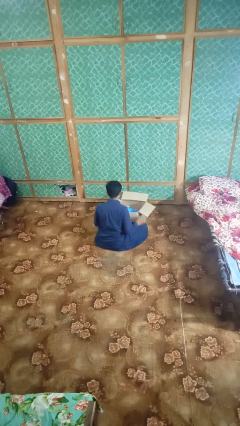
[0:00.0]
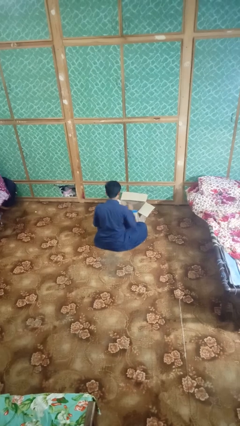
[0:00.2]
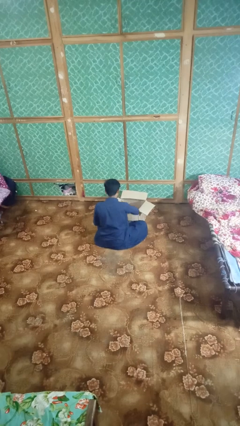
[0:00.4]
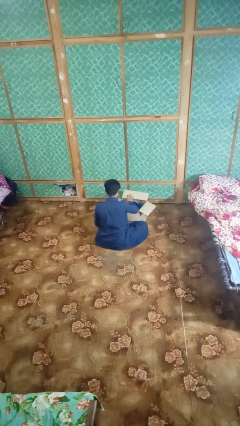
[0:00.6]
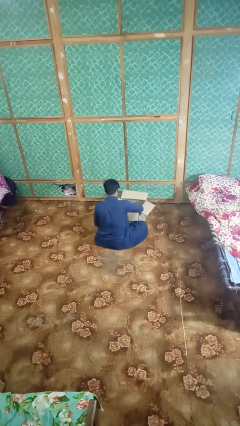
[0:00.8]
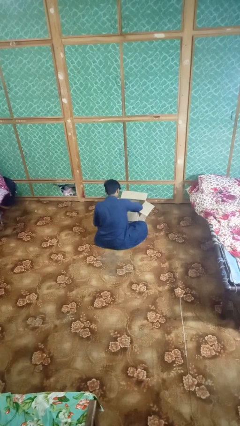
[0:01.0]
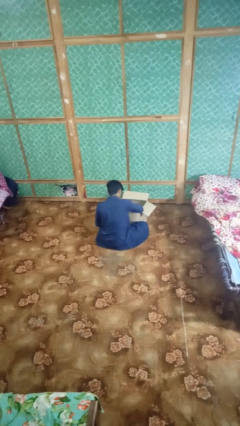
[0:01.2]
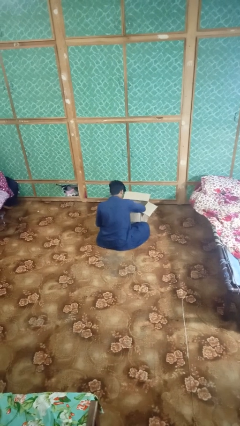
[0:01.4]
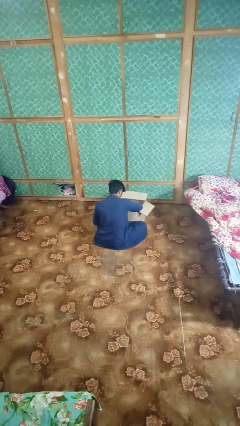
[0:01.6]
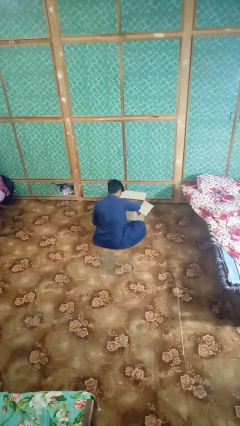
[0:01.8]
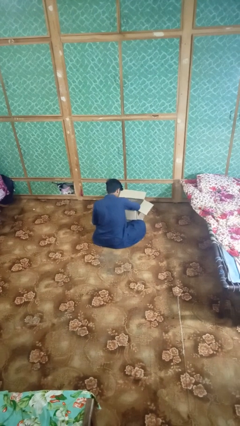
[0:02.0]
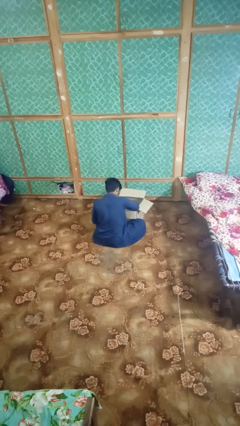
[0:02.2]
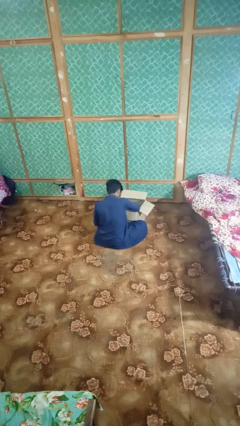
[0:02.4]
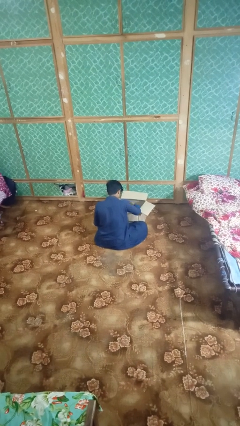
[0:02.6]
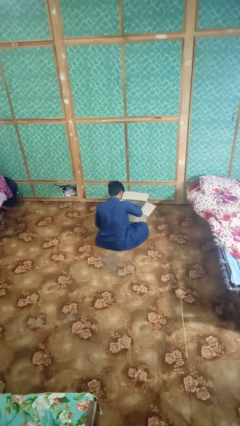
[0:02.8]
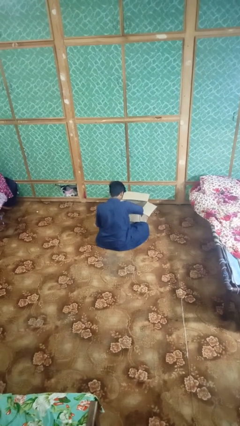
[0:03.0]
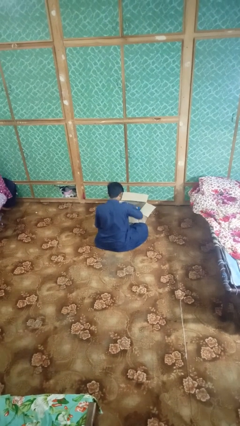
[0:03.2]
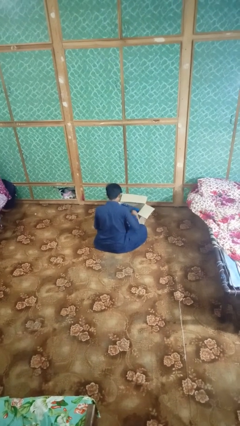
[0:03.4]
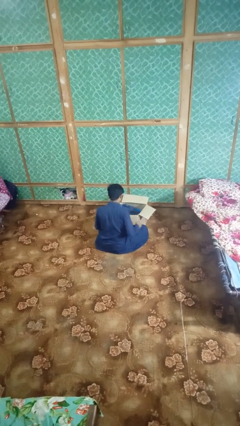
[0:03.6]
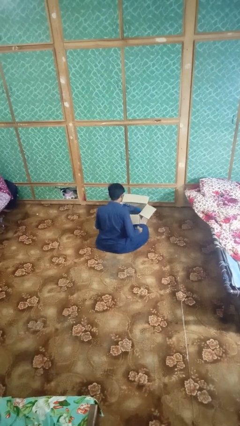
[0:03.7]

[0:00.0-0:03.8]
person searches in box

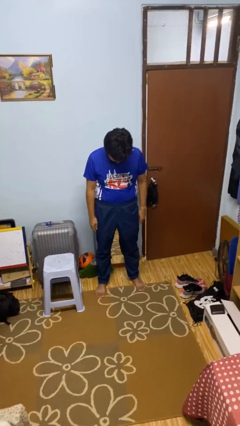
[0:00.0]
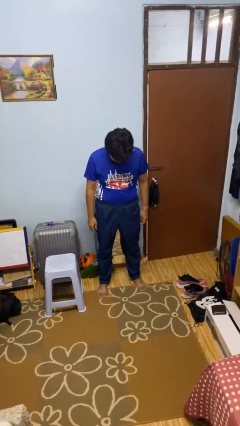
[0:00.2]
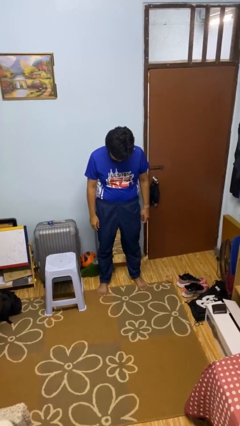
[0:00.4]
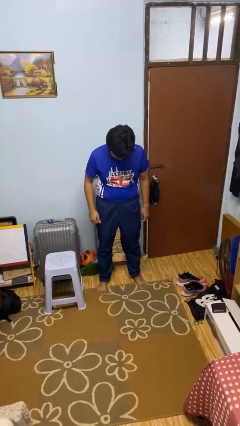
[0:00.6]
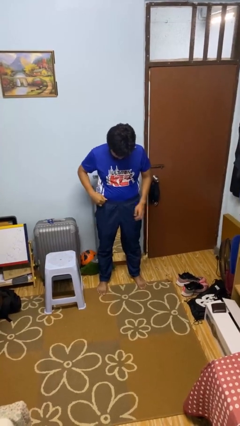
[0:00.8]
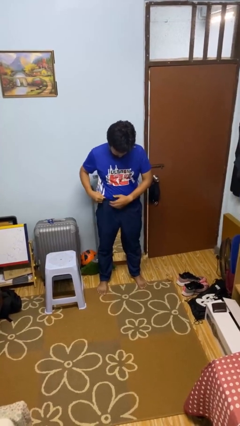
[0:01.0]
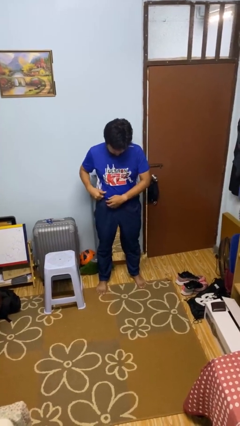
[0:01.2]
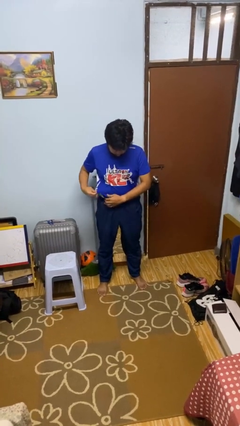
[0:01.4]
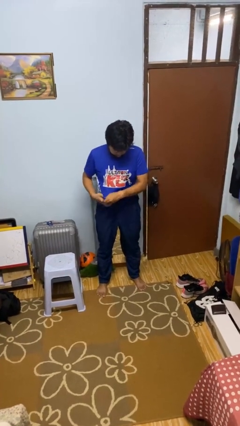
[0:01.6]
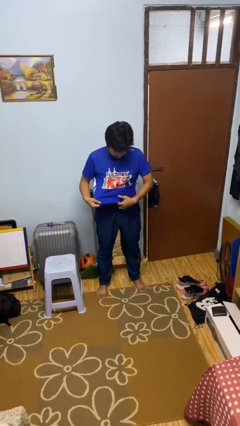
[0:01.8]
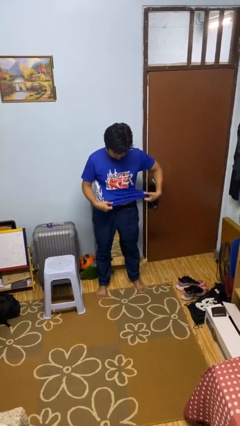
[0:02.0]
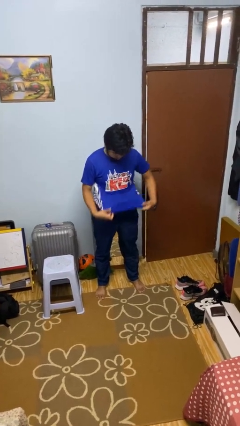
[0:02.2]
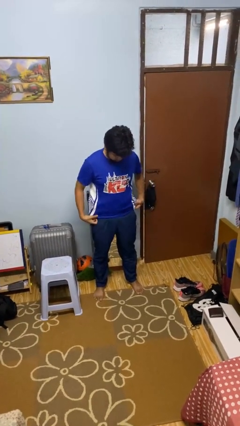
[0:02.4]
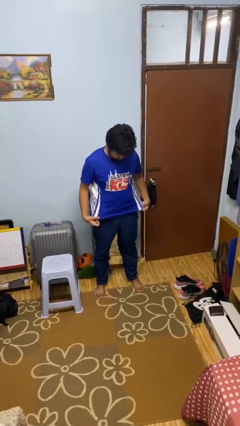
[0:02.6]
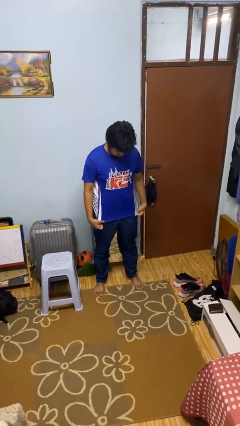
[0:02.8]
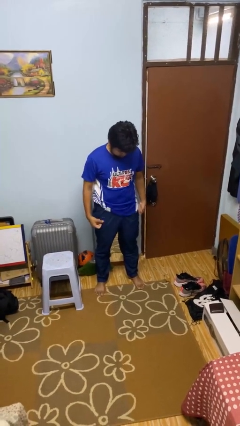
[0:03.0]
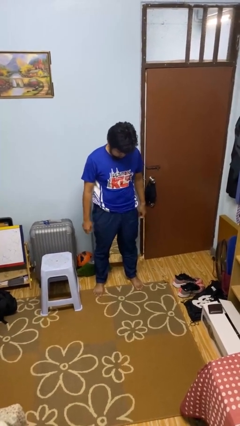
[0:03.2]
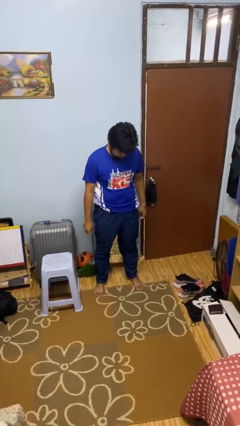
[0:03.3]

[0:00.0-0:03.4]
person untucks shirt

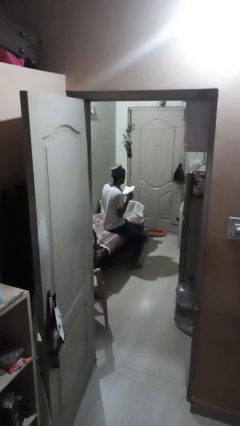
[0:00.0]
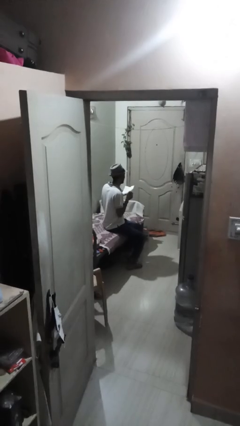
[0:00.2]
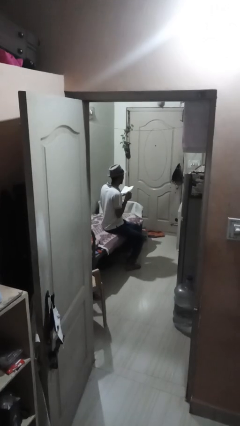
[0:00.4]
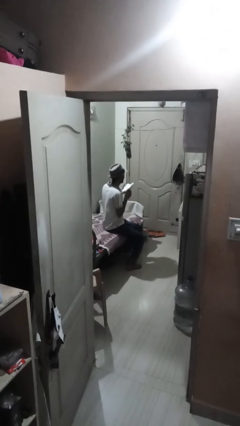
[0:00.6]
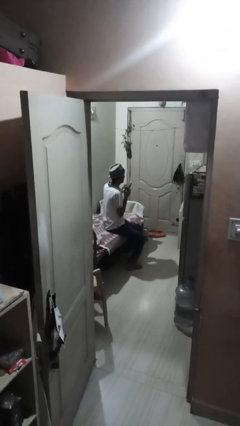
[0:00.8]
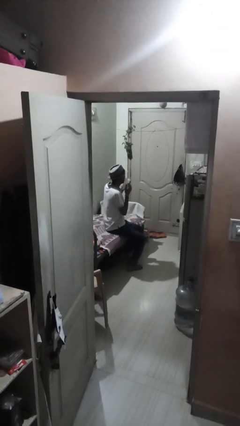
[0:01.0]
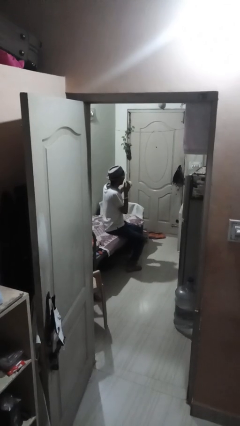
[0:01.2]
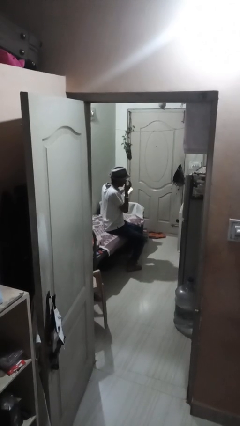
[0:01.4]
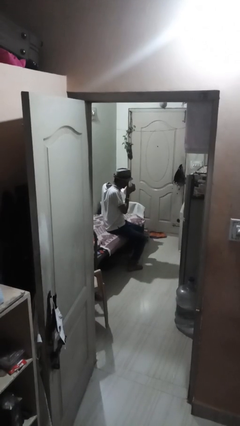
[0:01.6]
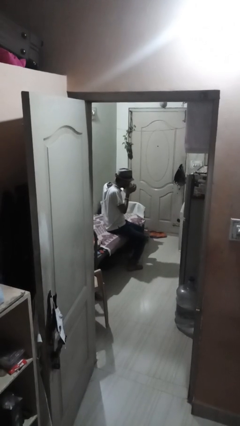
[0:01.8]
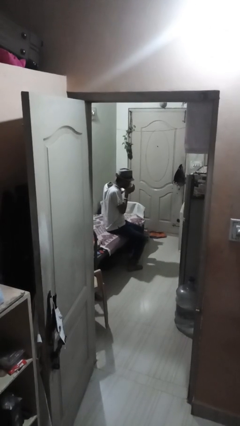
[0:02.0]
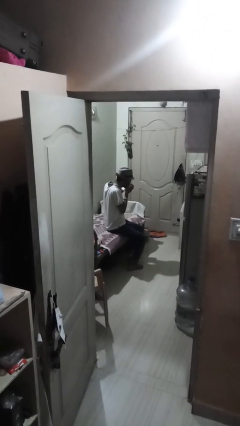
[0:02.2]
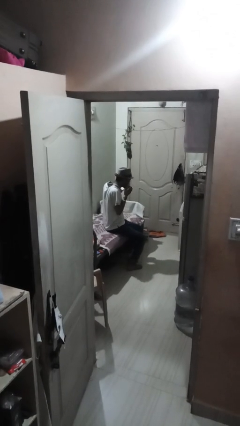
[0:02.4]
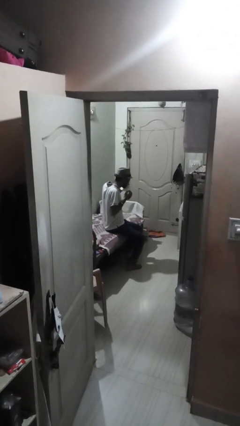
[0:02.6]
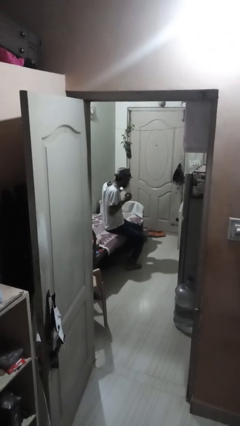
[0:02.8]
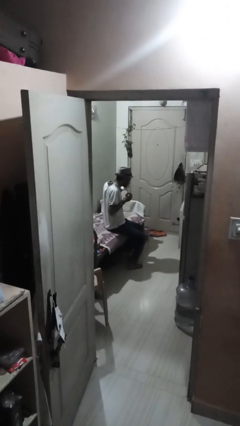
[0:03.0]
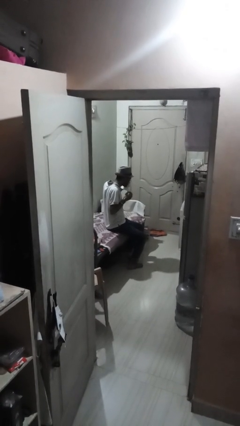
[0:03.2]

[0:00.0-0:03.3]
person blows nose

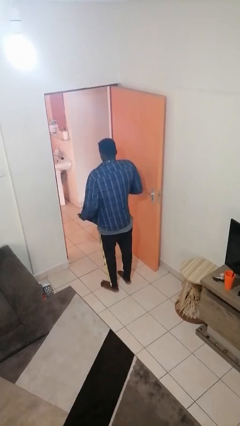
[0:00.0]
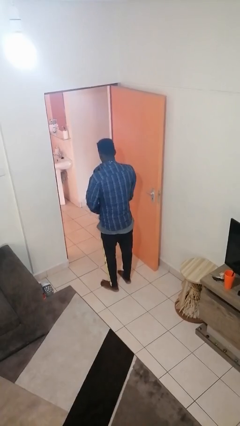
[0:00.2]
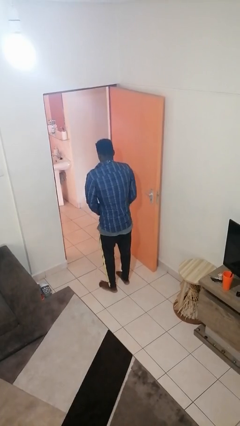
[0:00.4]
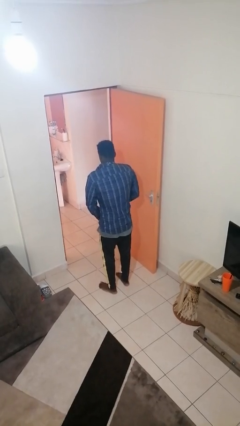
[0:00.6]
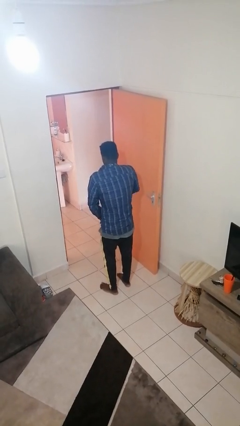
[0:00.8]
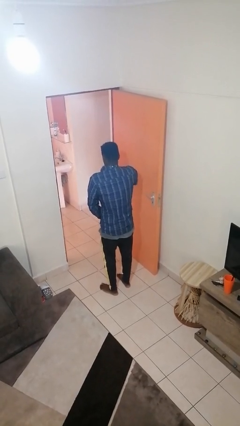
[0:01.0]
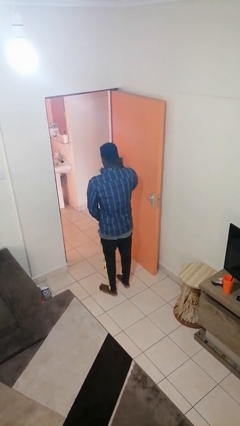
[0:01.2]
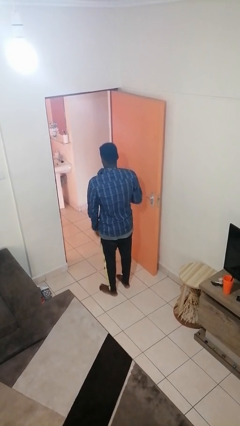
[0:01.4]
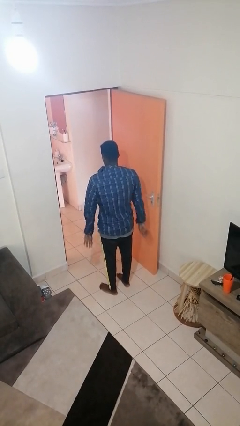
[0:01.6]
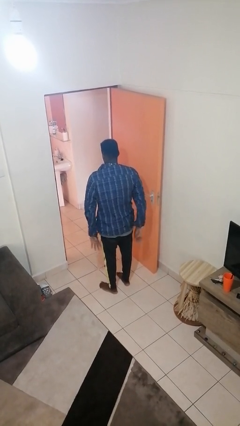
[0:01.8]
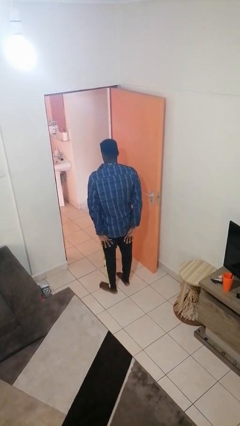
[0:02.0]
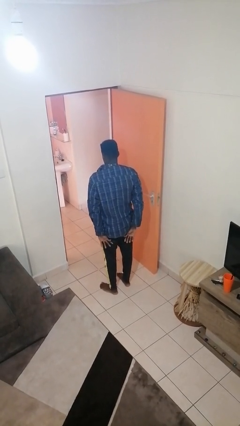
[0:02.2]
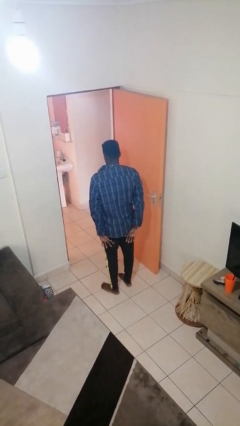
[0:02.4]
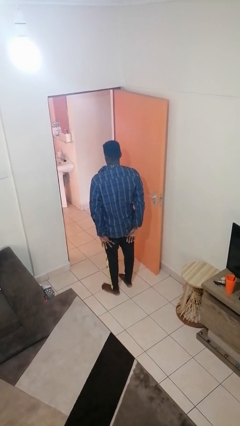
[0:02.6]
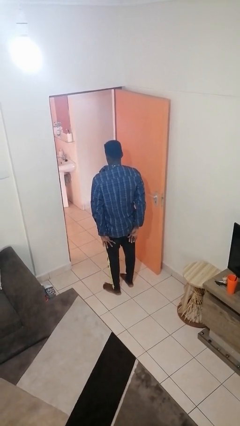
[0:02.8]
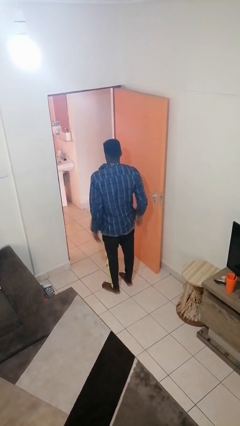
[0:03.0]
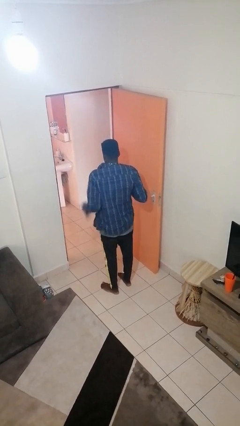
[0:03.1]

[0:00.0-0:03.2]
person zips up jacket

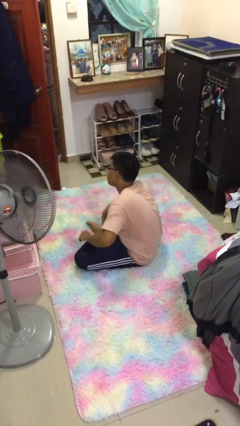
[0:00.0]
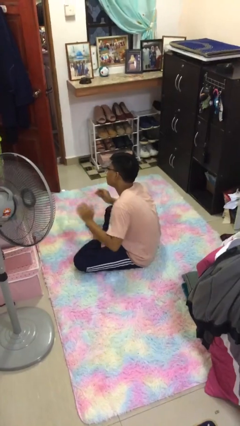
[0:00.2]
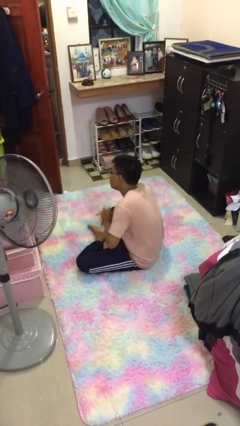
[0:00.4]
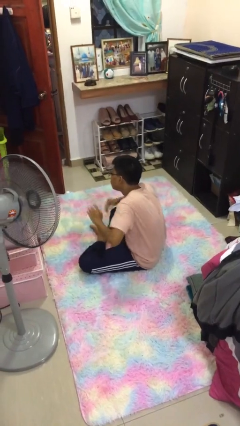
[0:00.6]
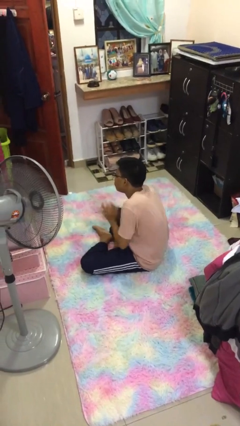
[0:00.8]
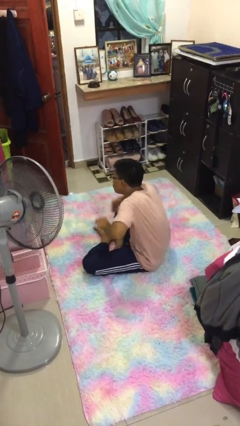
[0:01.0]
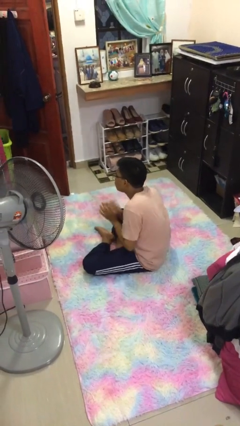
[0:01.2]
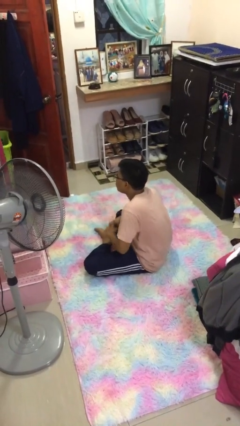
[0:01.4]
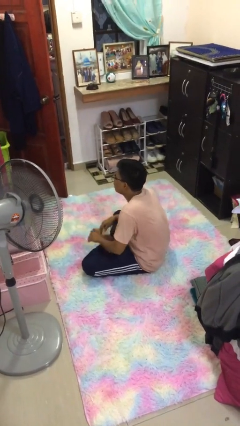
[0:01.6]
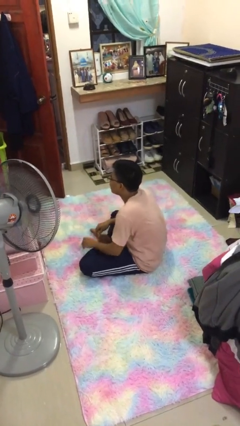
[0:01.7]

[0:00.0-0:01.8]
person claps hands

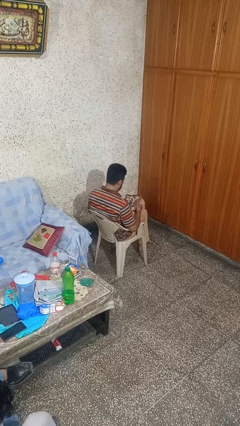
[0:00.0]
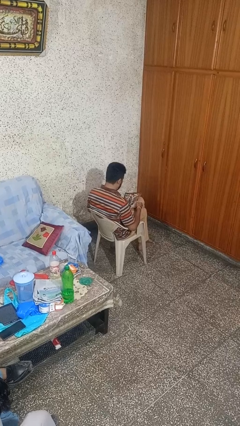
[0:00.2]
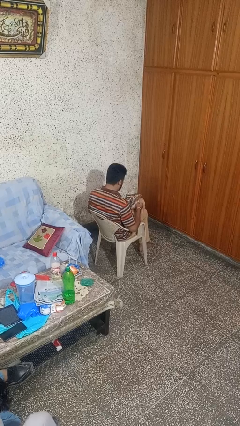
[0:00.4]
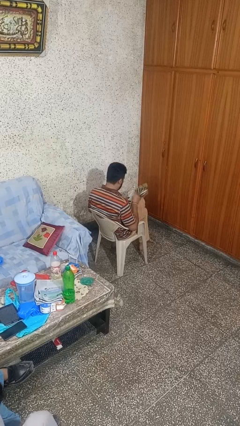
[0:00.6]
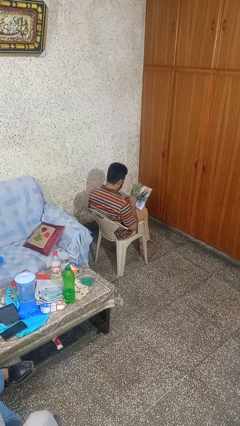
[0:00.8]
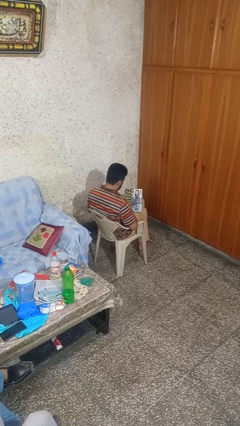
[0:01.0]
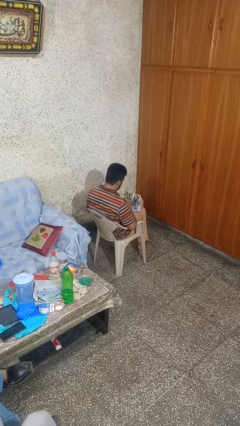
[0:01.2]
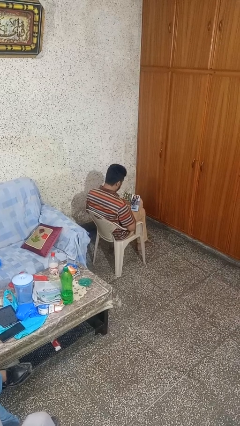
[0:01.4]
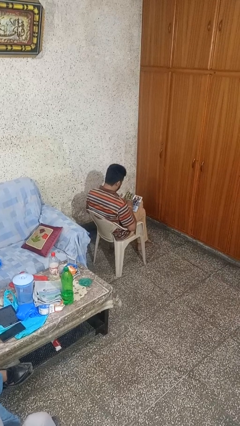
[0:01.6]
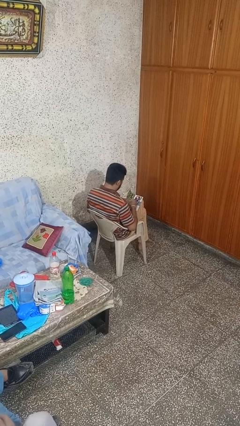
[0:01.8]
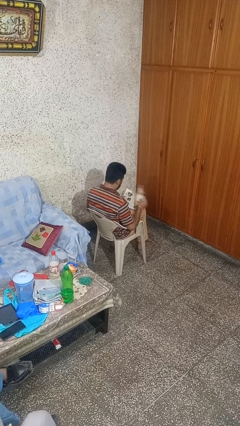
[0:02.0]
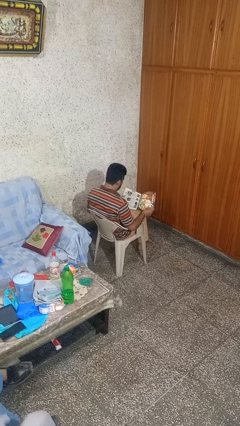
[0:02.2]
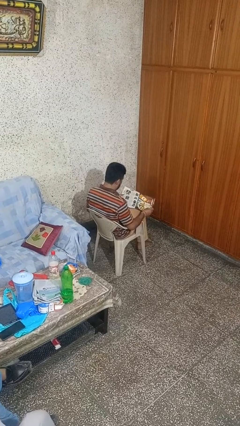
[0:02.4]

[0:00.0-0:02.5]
person reads magazine
